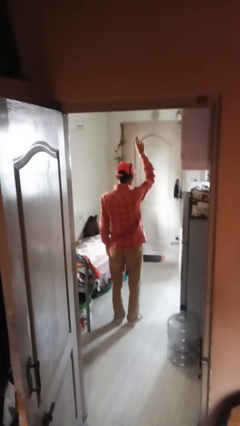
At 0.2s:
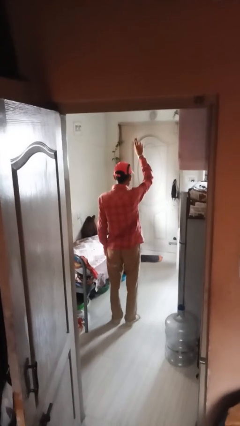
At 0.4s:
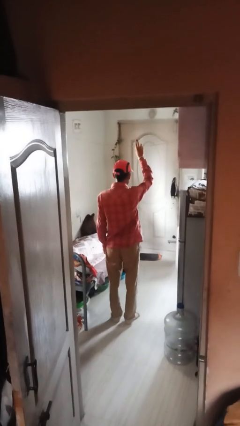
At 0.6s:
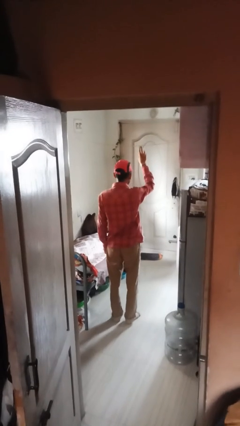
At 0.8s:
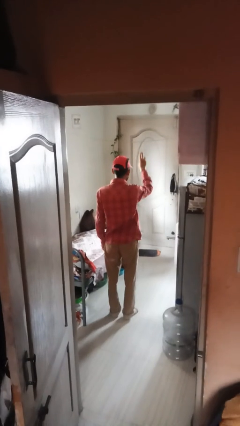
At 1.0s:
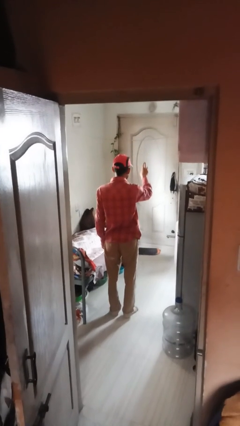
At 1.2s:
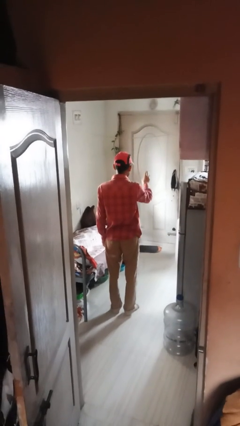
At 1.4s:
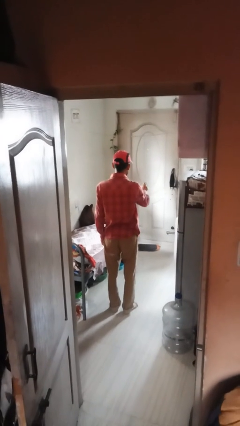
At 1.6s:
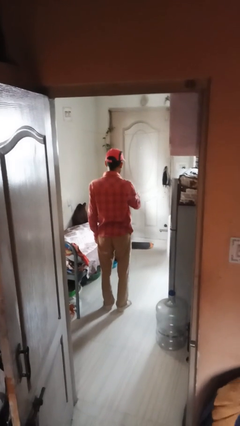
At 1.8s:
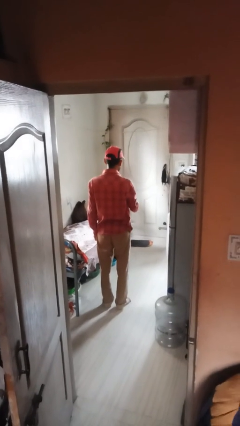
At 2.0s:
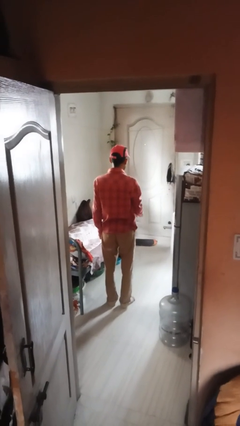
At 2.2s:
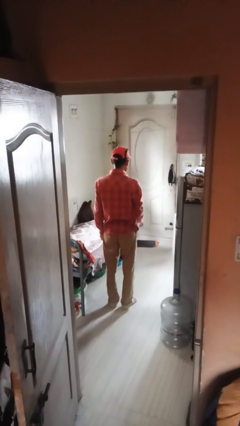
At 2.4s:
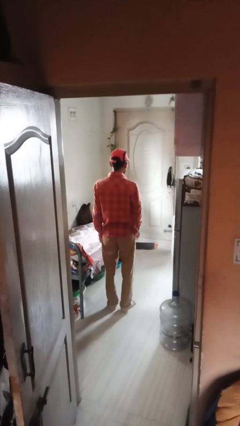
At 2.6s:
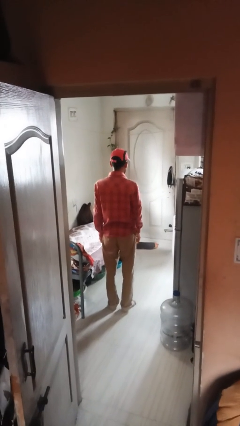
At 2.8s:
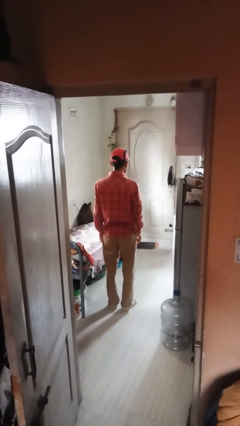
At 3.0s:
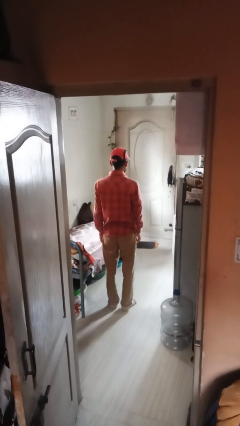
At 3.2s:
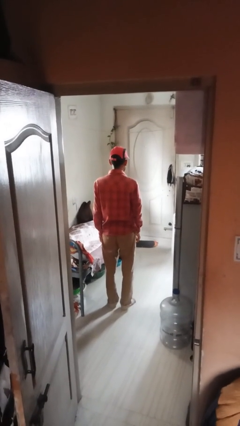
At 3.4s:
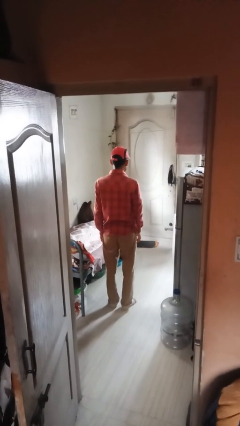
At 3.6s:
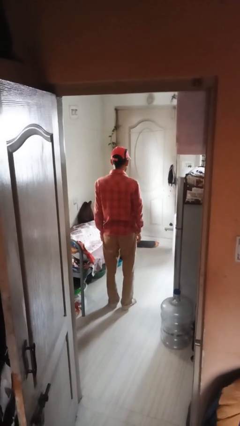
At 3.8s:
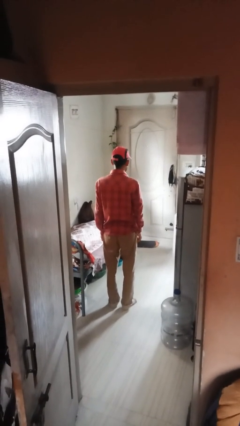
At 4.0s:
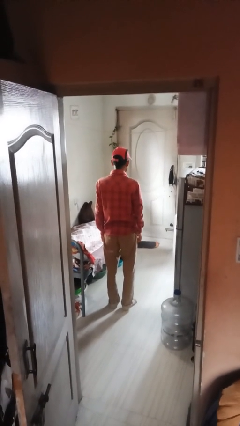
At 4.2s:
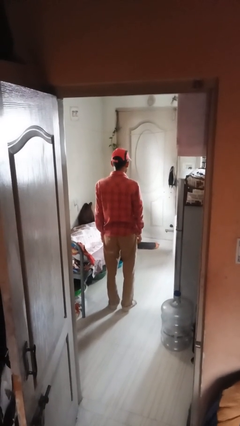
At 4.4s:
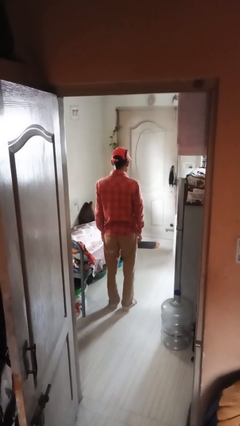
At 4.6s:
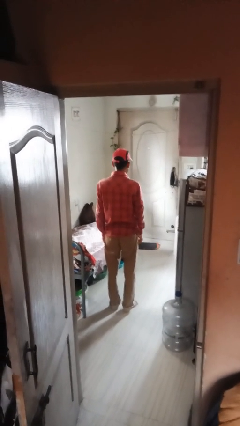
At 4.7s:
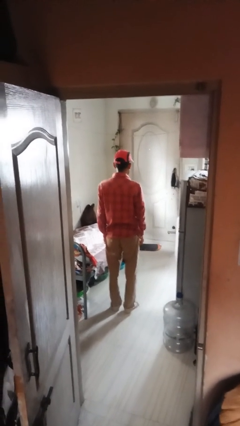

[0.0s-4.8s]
person gestures swipe up

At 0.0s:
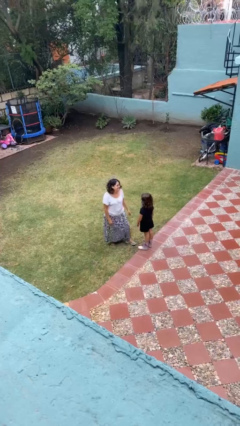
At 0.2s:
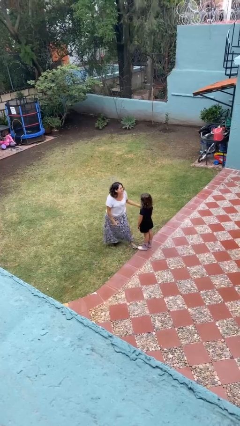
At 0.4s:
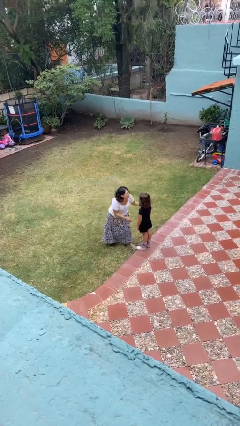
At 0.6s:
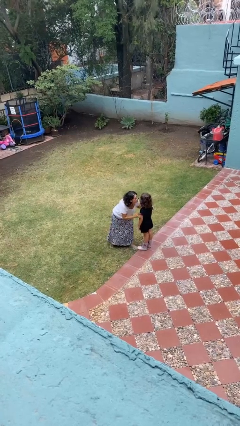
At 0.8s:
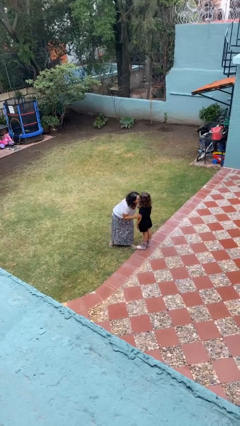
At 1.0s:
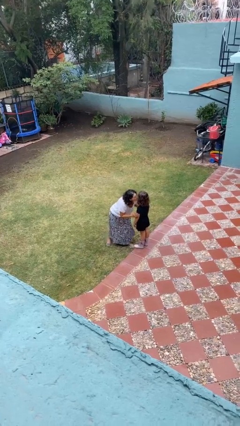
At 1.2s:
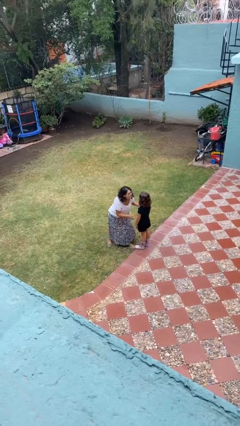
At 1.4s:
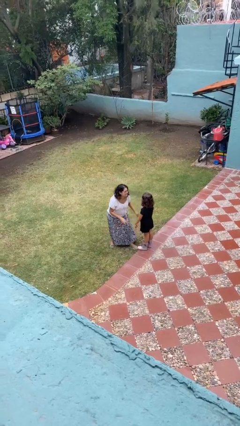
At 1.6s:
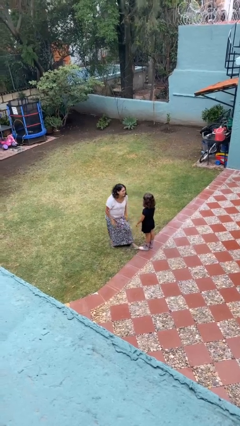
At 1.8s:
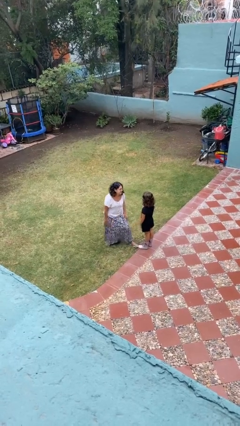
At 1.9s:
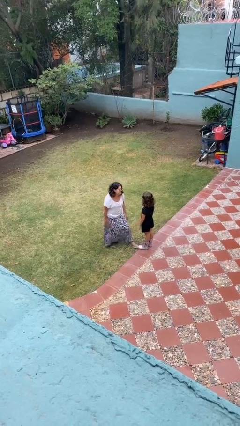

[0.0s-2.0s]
person kisses cheek of person

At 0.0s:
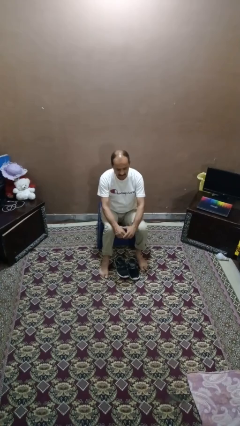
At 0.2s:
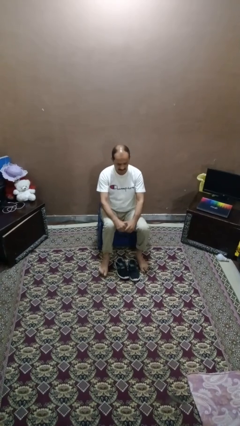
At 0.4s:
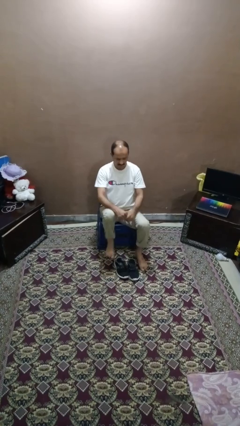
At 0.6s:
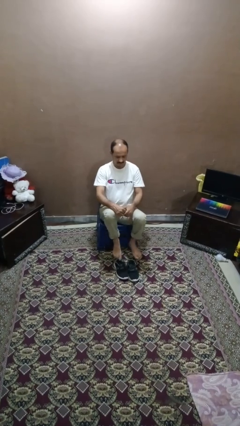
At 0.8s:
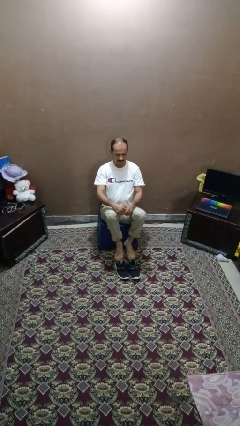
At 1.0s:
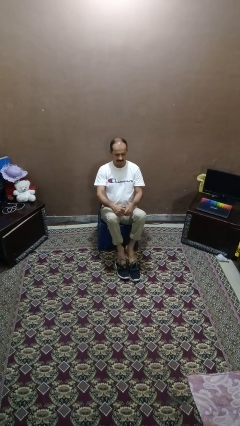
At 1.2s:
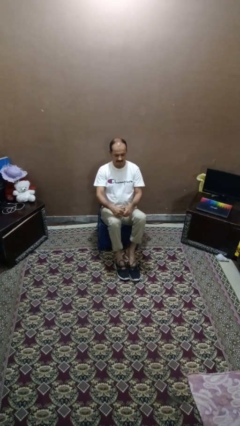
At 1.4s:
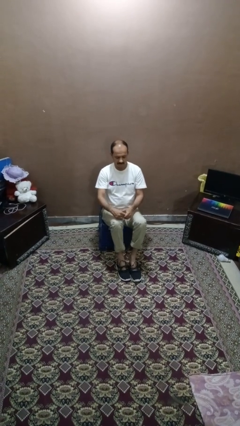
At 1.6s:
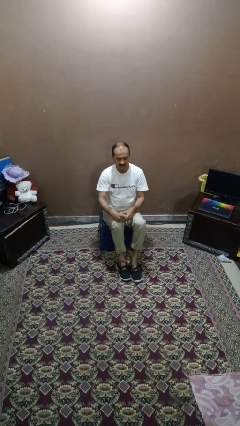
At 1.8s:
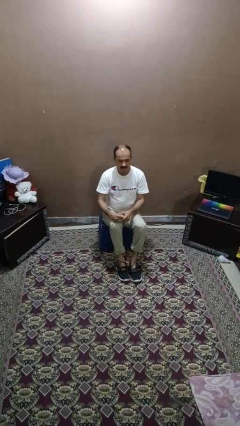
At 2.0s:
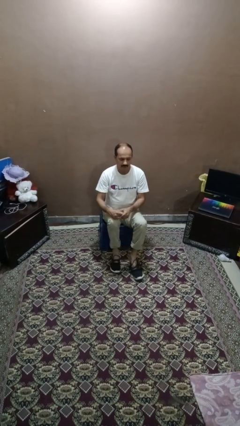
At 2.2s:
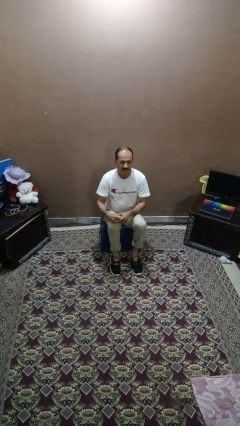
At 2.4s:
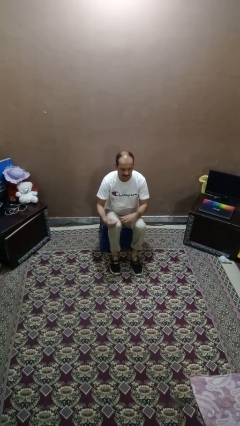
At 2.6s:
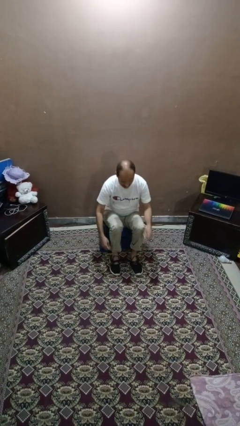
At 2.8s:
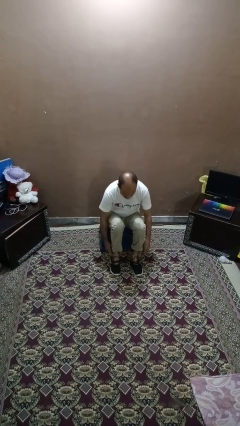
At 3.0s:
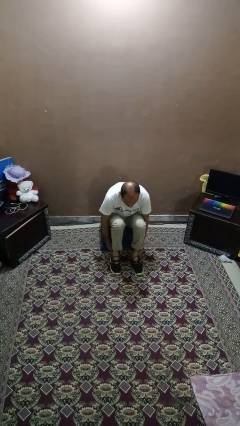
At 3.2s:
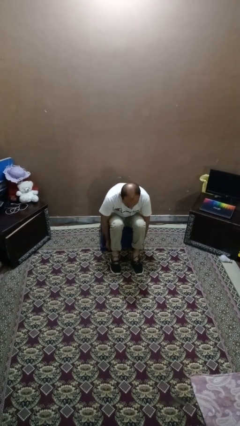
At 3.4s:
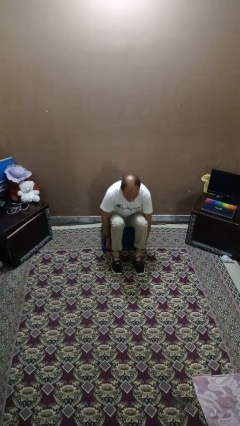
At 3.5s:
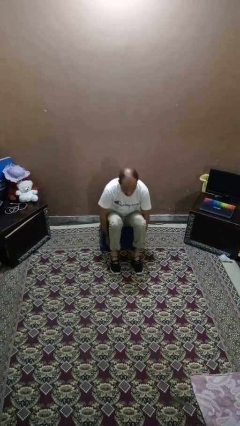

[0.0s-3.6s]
person puts on shoes

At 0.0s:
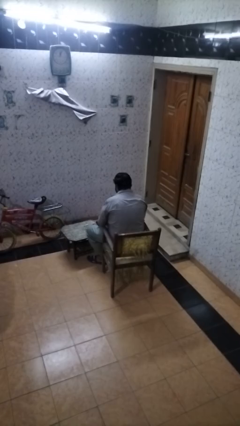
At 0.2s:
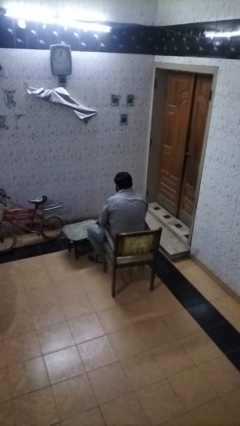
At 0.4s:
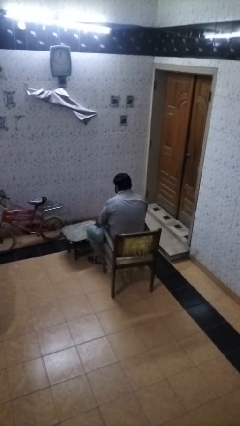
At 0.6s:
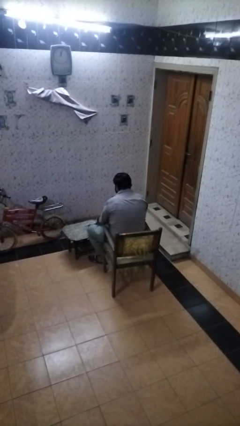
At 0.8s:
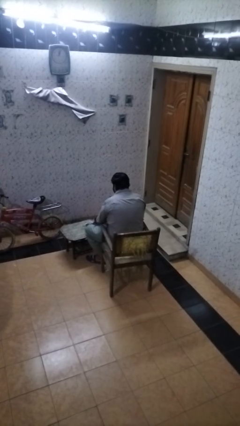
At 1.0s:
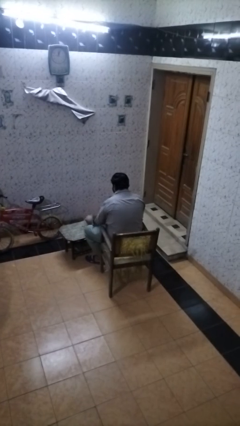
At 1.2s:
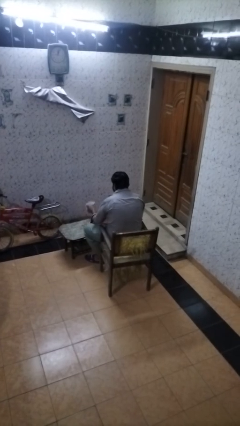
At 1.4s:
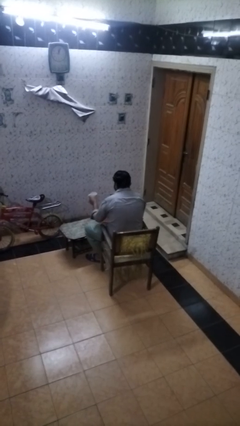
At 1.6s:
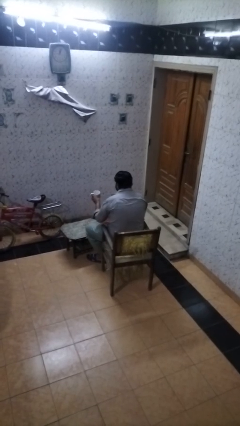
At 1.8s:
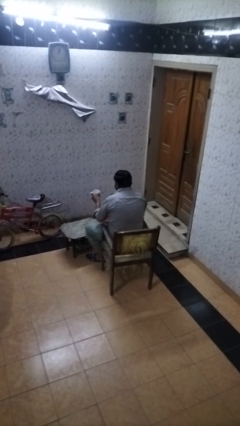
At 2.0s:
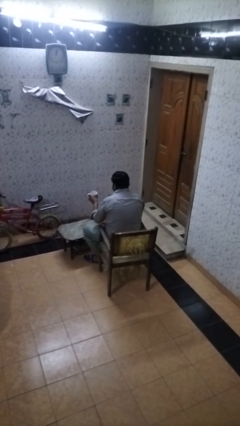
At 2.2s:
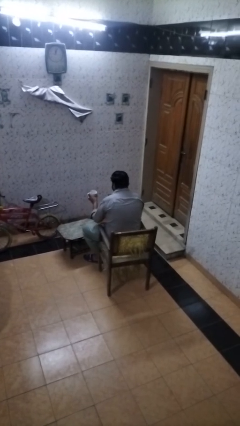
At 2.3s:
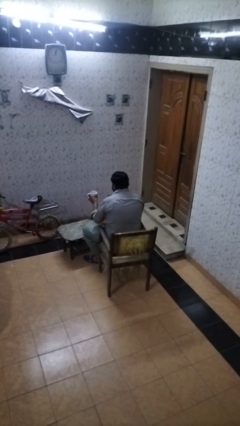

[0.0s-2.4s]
person picks up object from table

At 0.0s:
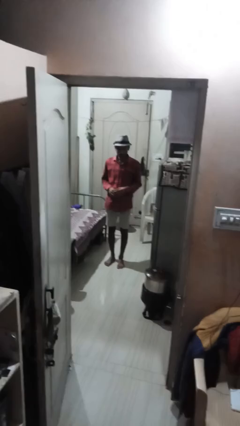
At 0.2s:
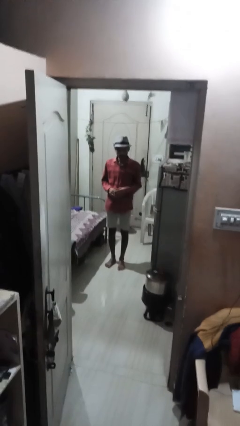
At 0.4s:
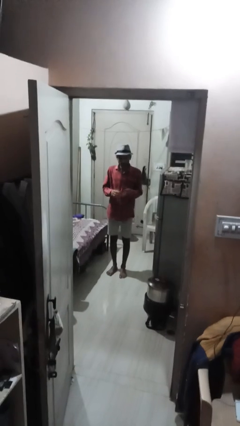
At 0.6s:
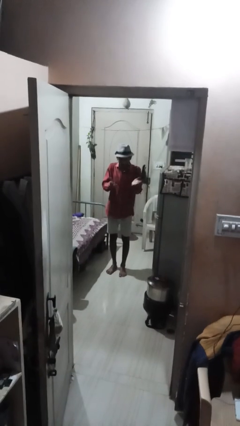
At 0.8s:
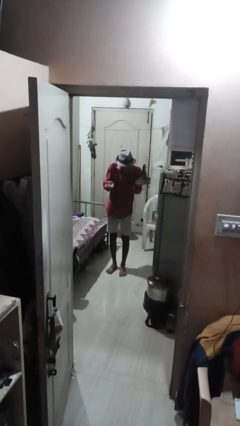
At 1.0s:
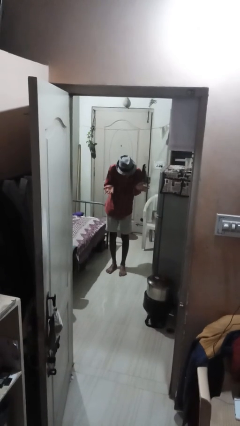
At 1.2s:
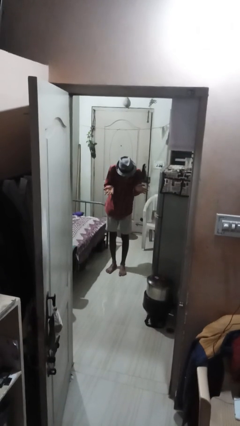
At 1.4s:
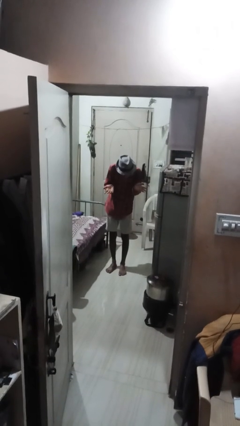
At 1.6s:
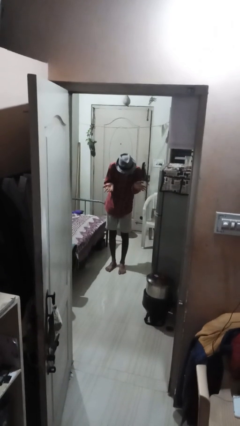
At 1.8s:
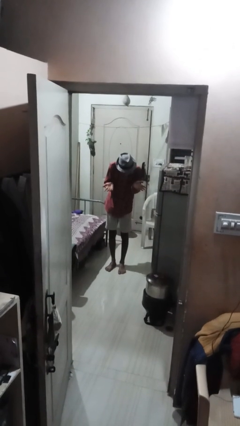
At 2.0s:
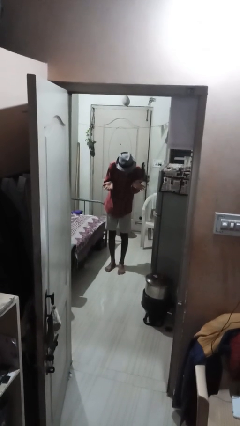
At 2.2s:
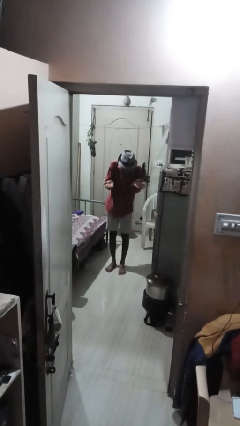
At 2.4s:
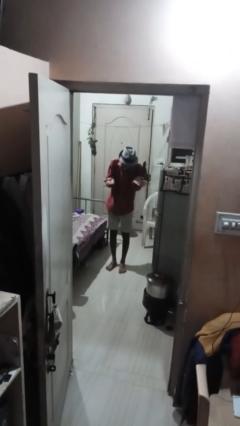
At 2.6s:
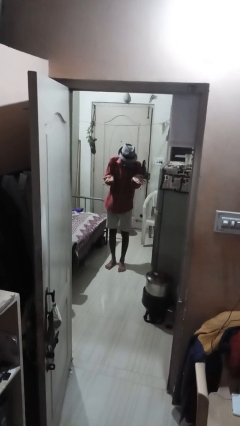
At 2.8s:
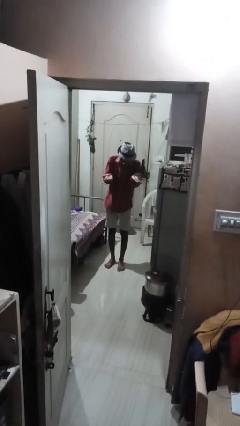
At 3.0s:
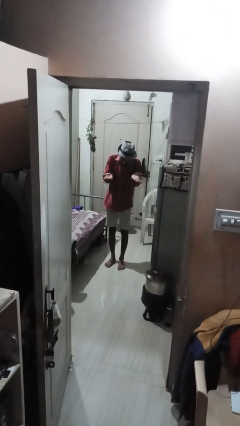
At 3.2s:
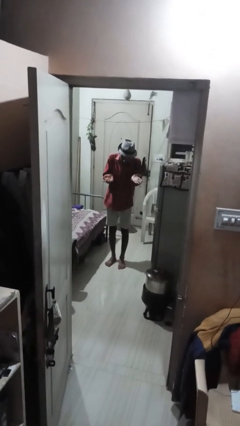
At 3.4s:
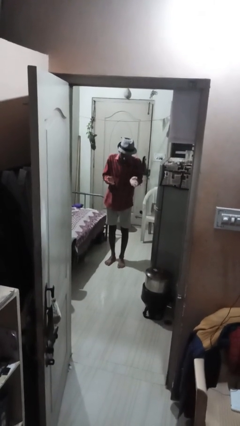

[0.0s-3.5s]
person shrugs

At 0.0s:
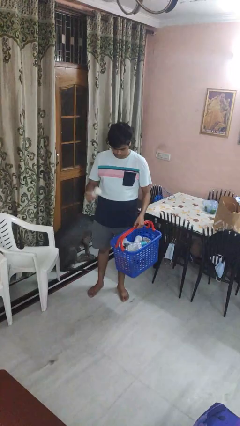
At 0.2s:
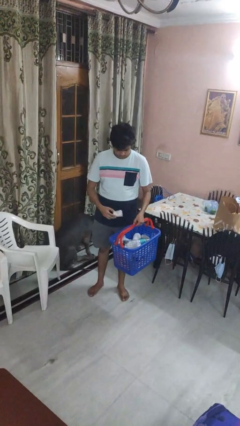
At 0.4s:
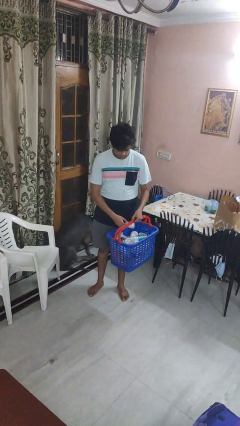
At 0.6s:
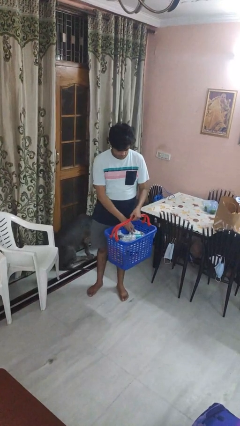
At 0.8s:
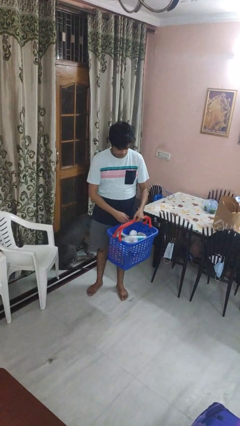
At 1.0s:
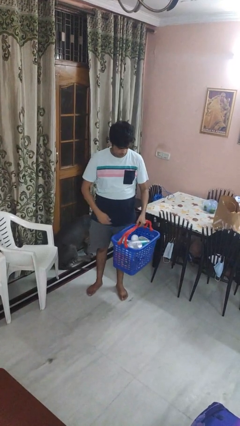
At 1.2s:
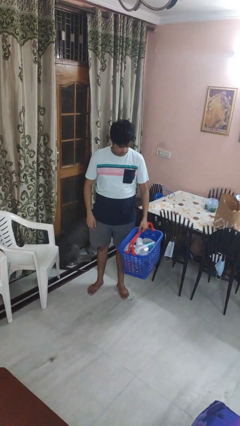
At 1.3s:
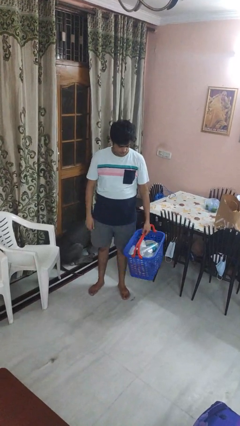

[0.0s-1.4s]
person puts object into basket
